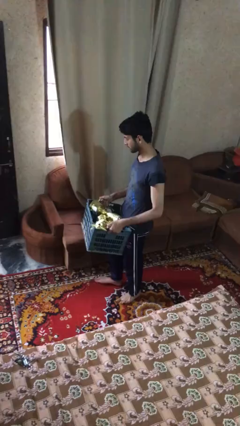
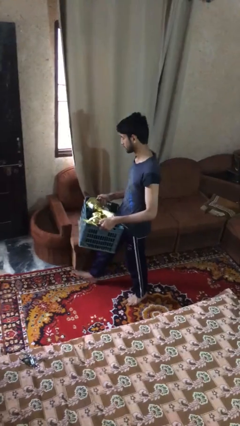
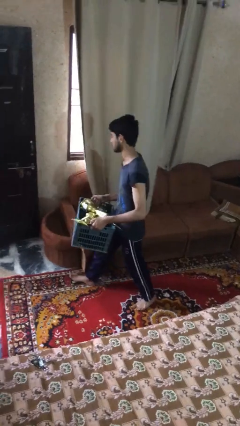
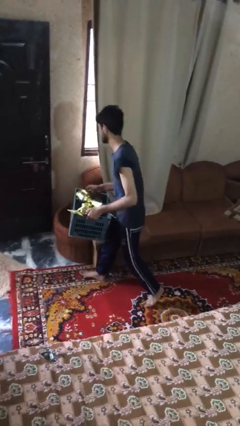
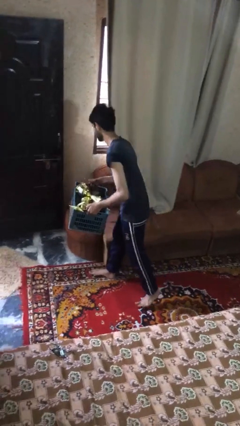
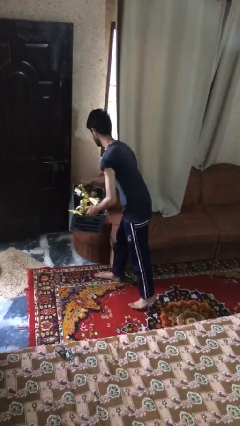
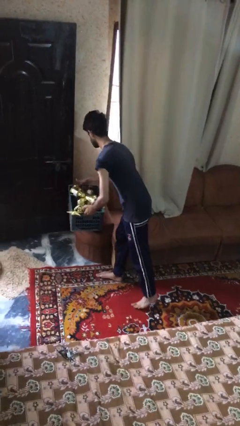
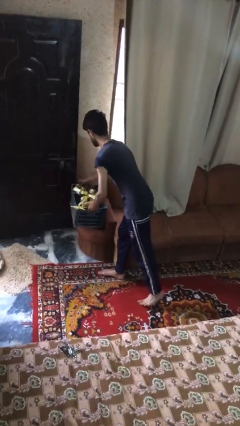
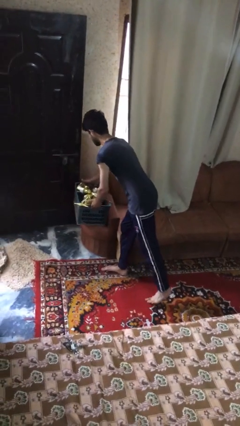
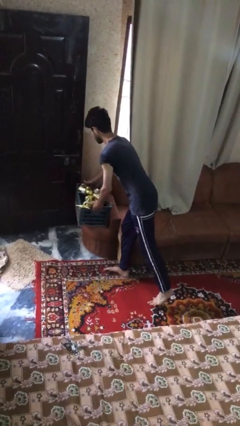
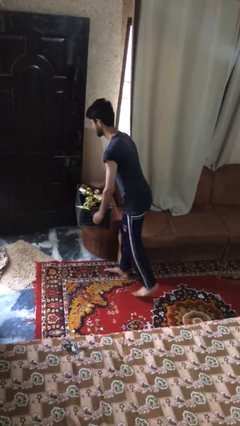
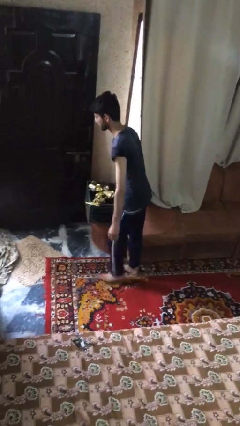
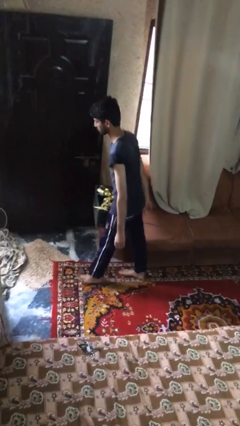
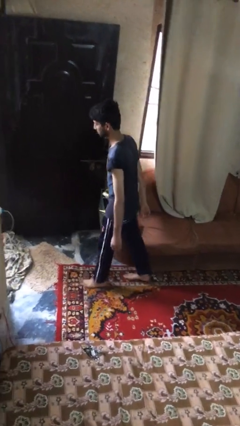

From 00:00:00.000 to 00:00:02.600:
person puts down object on table

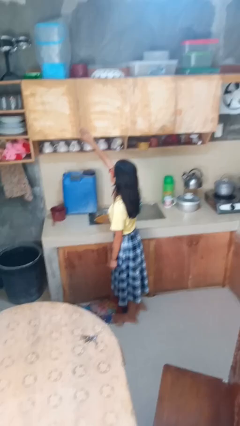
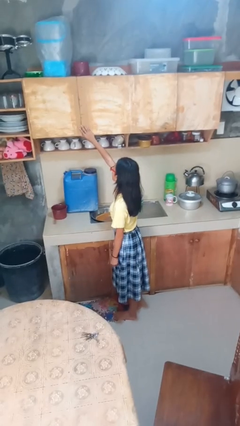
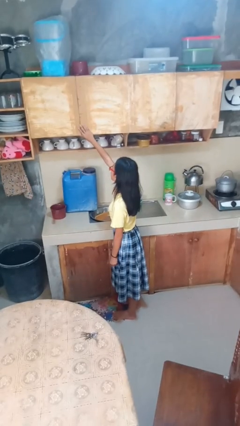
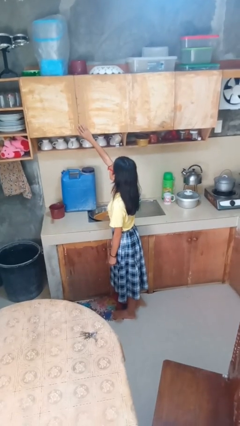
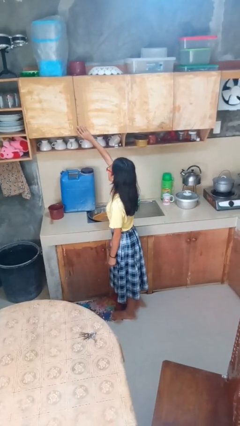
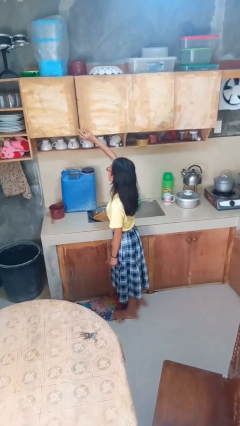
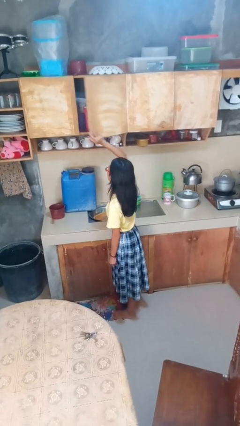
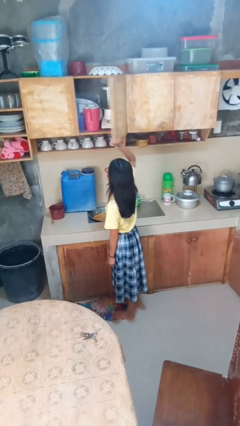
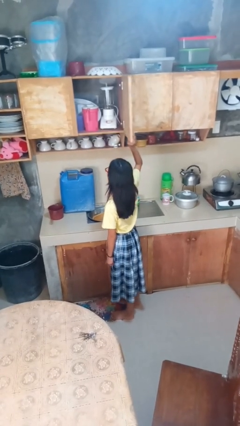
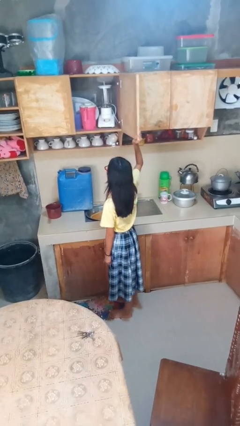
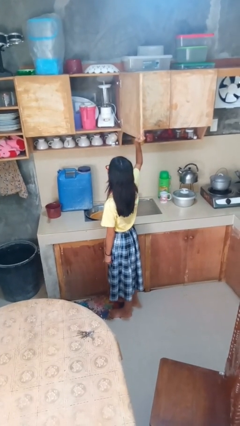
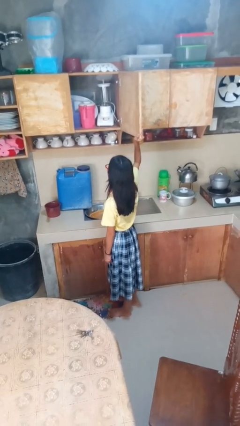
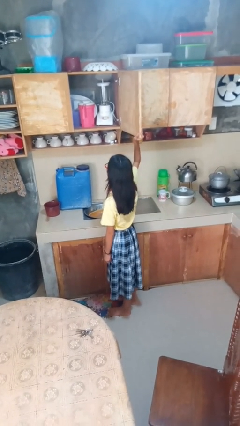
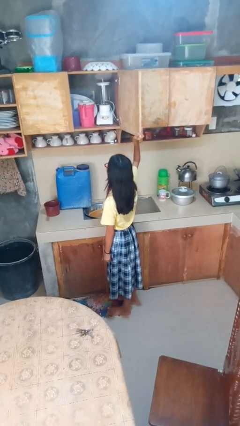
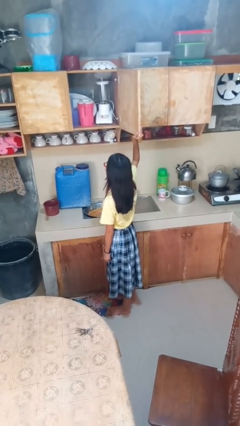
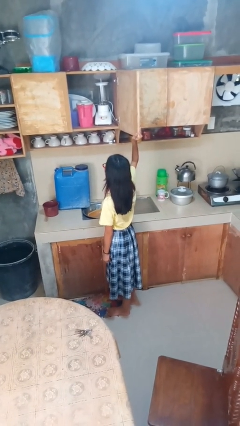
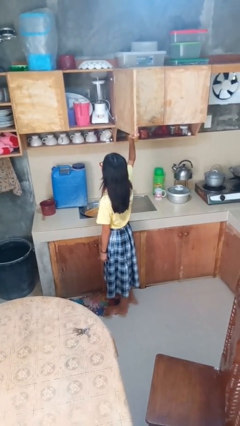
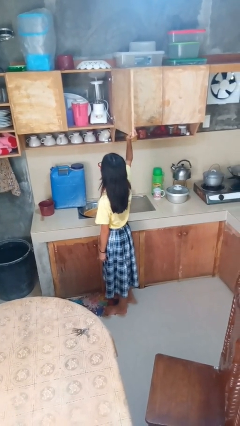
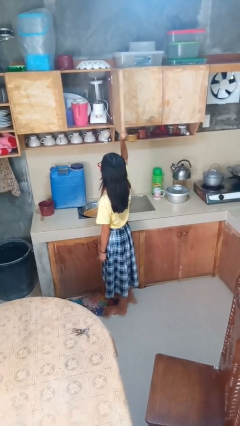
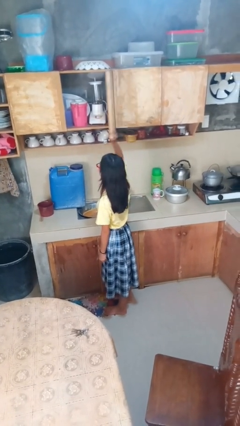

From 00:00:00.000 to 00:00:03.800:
person opens cabinet

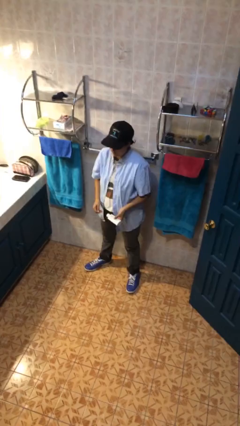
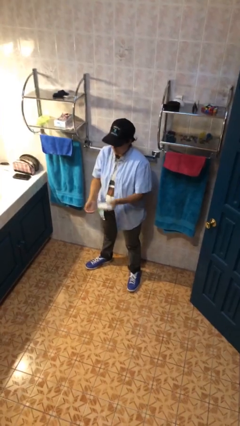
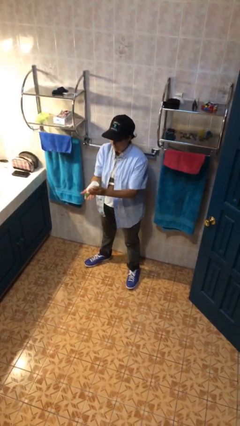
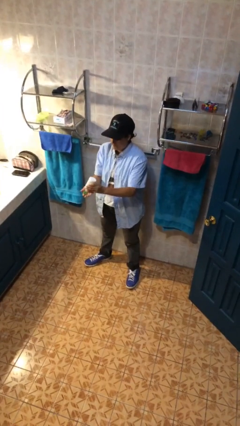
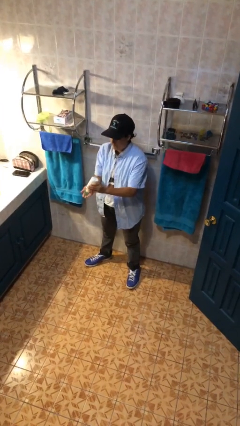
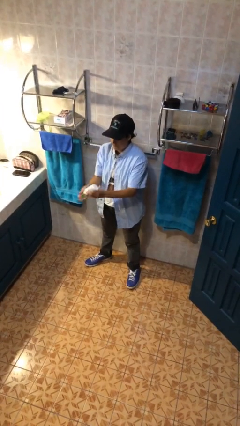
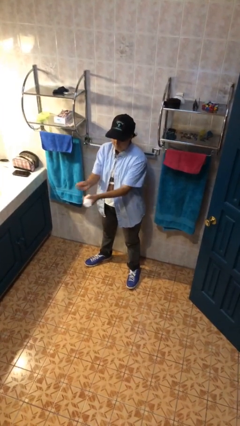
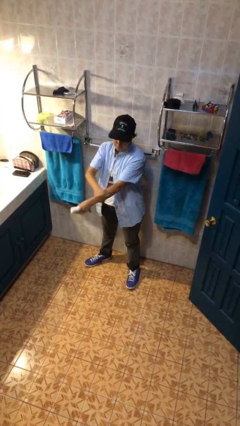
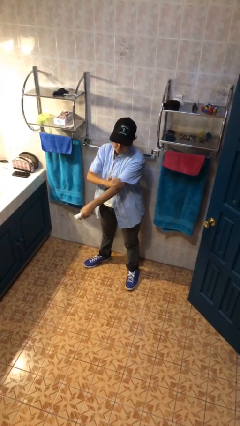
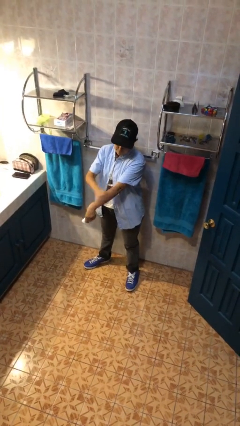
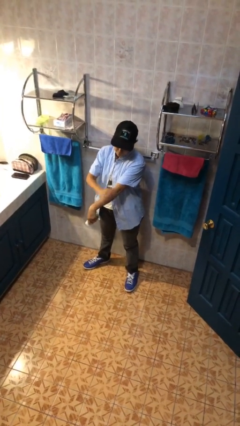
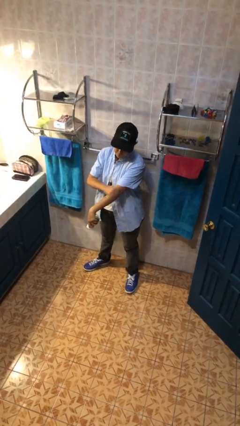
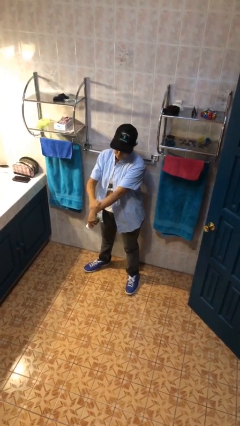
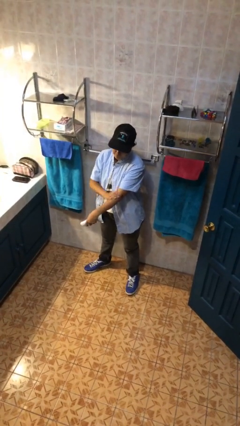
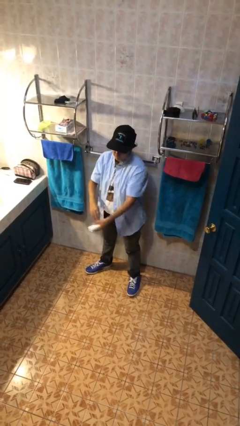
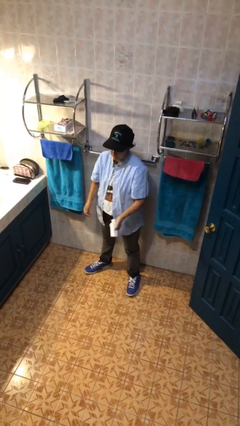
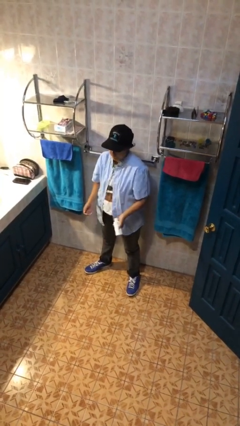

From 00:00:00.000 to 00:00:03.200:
person applies sunscreen

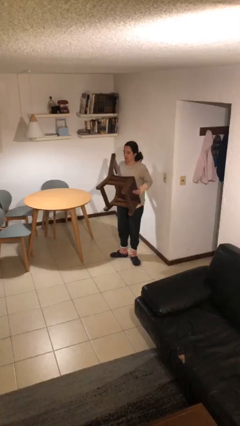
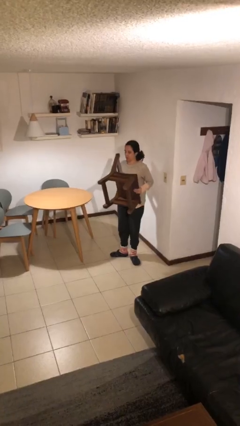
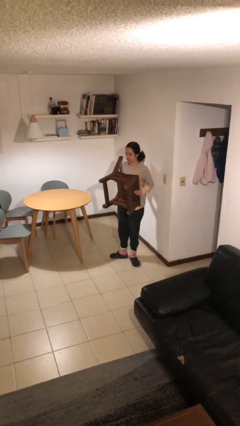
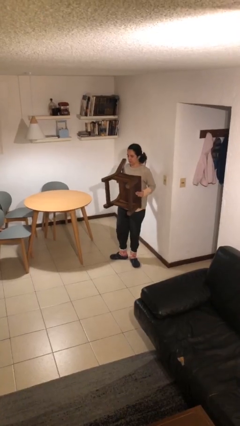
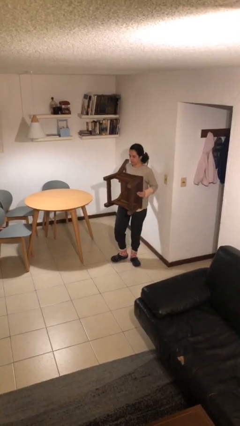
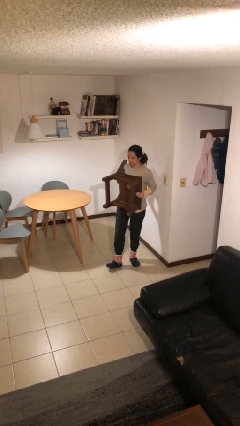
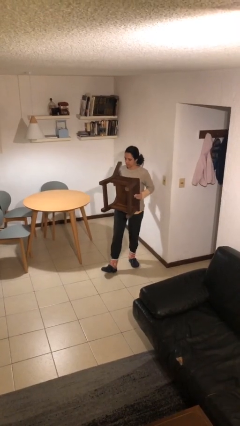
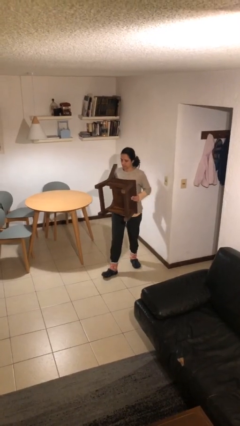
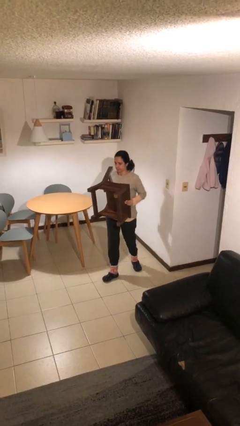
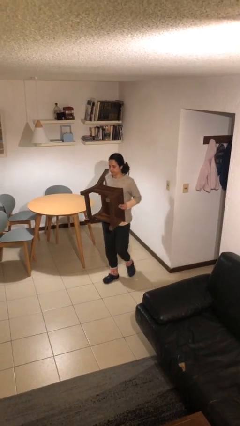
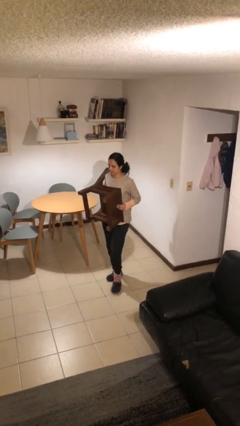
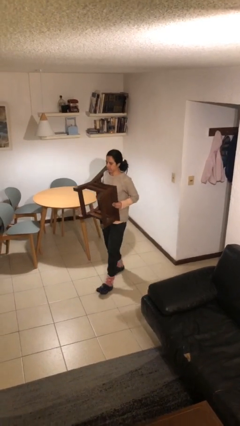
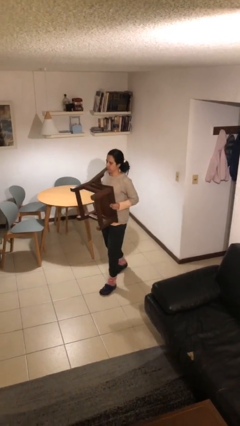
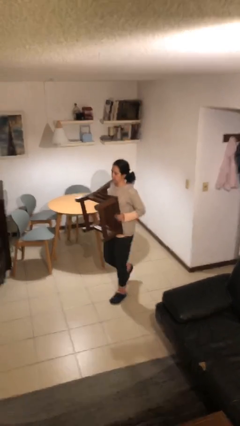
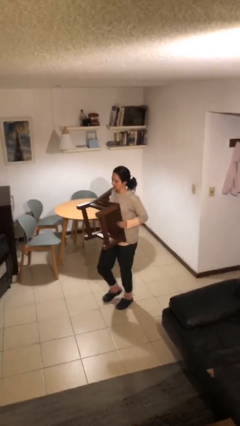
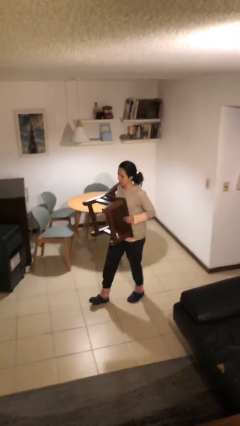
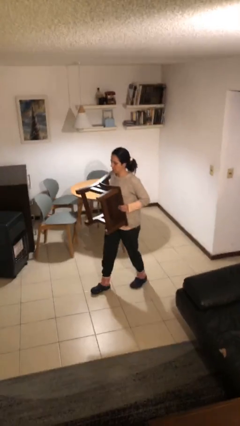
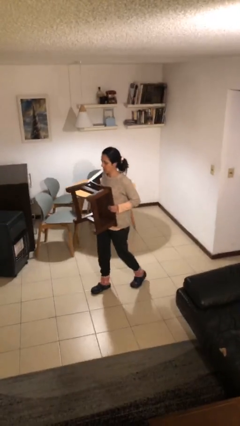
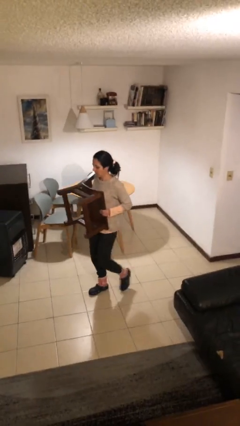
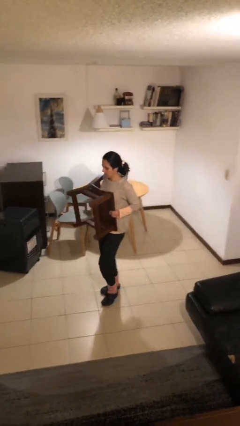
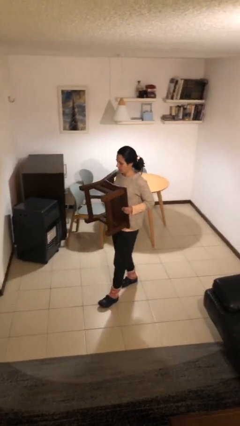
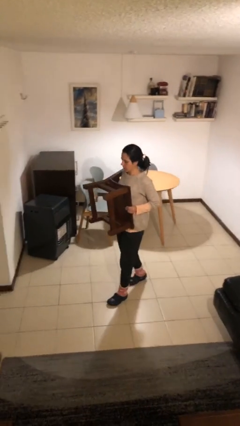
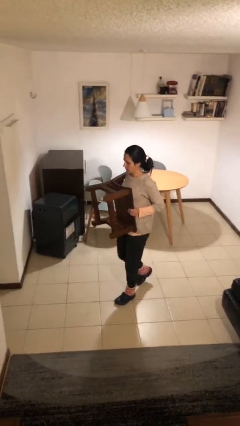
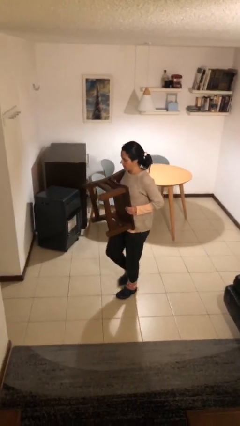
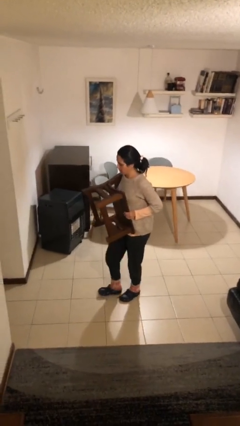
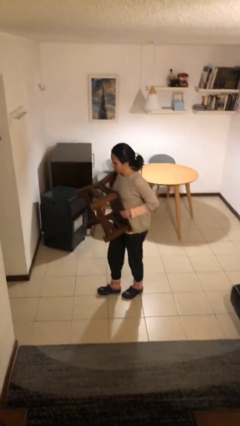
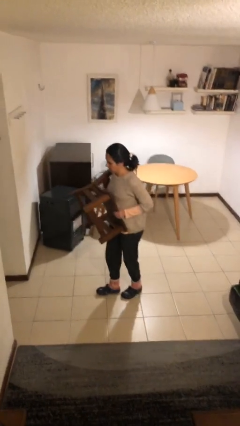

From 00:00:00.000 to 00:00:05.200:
person carries heavy object

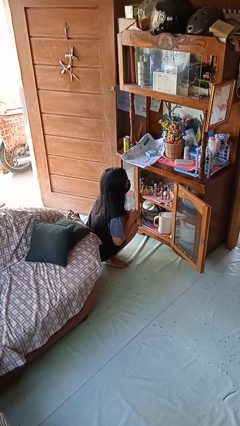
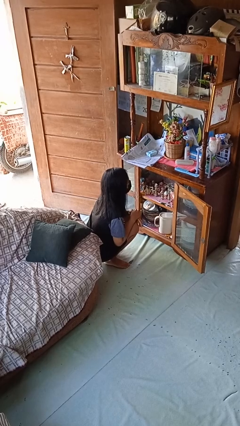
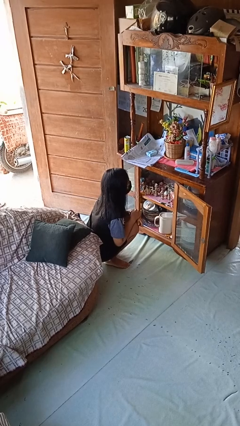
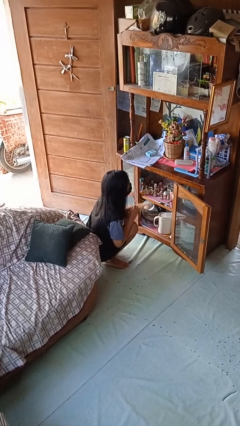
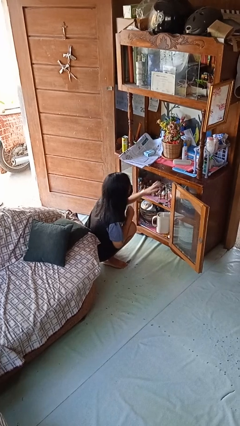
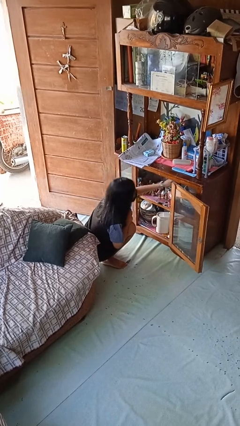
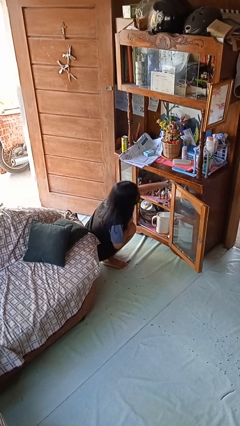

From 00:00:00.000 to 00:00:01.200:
person searches in cabinet

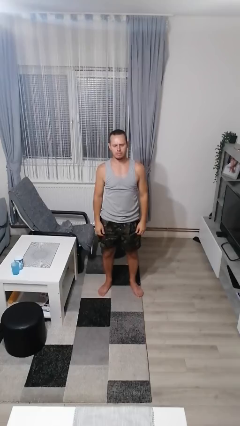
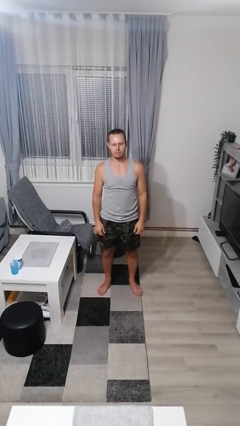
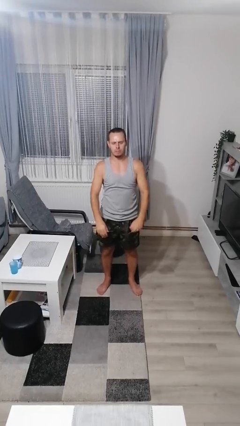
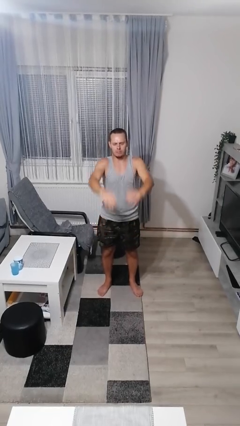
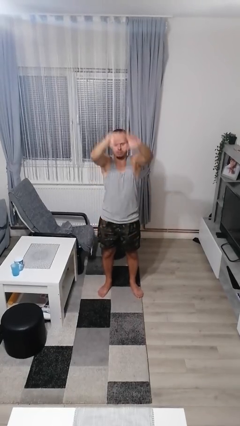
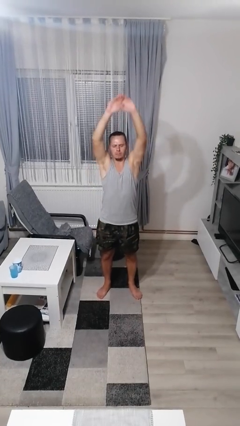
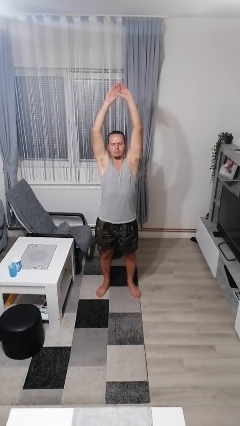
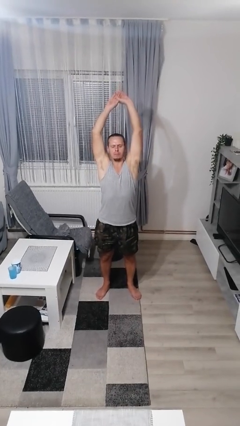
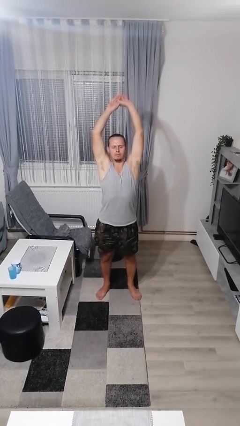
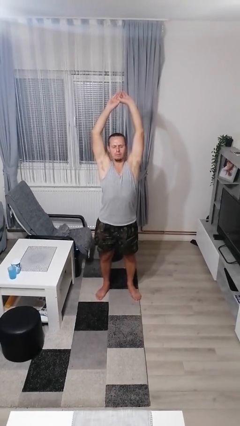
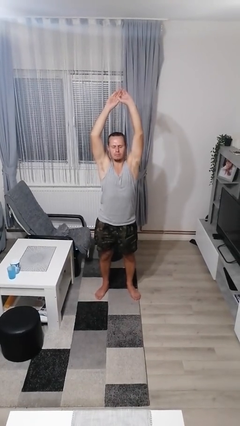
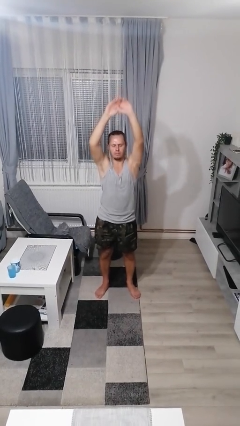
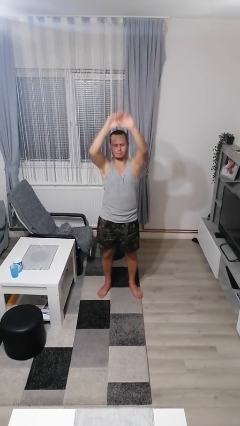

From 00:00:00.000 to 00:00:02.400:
person stretches arms over head
